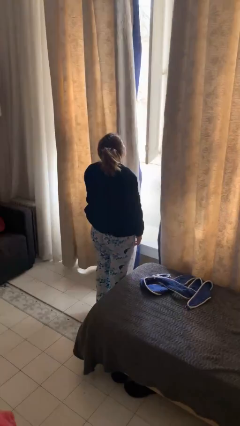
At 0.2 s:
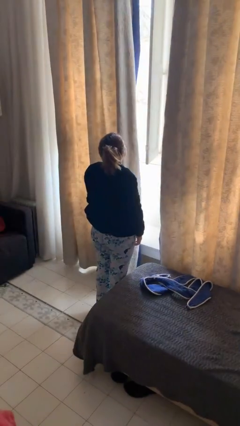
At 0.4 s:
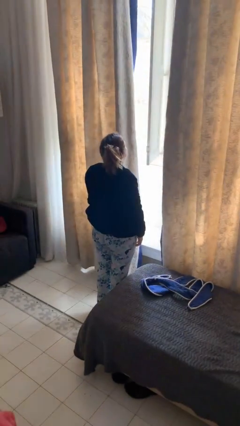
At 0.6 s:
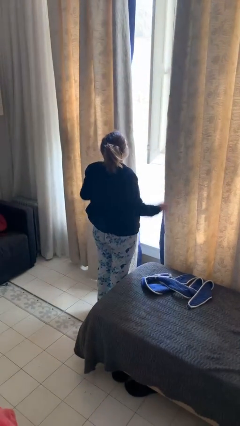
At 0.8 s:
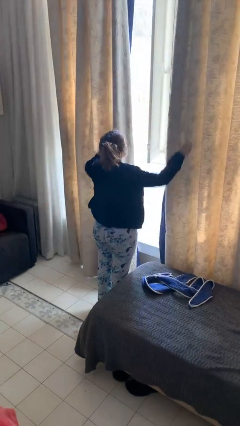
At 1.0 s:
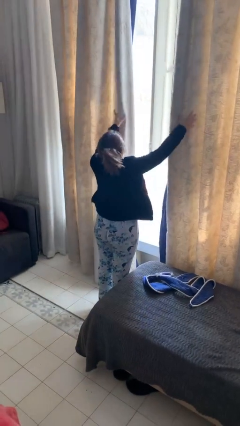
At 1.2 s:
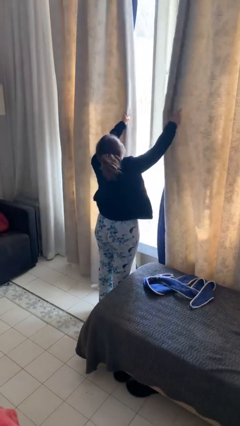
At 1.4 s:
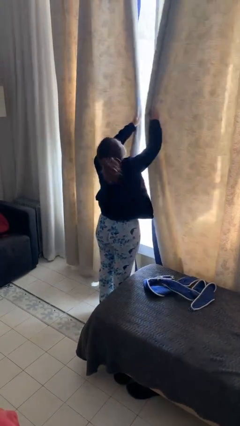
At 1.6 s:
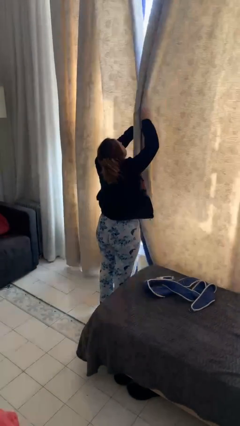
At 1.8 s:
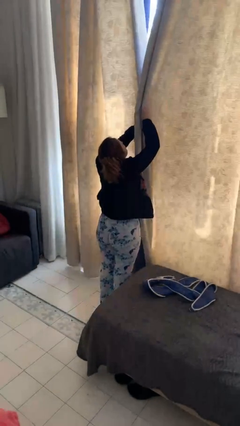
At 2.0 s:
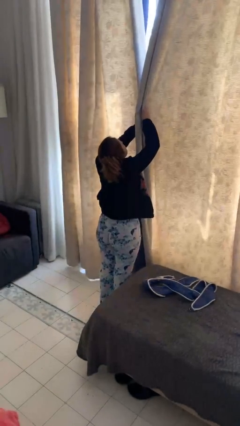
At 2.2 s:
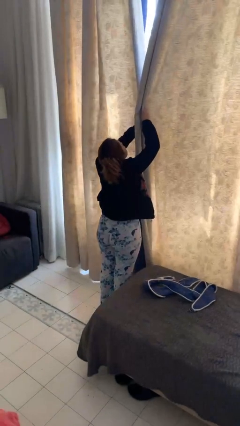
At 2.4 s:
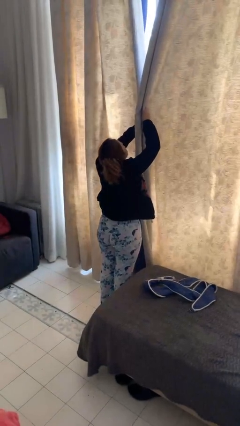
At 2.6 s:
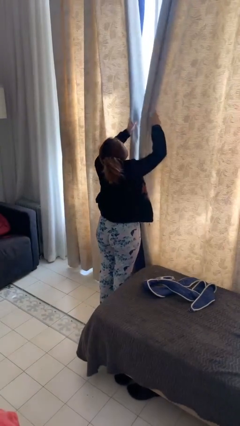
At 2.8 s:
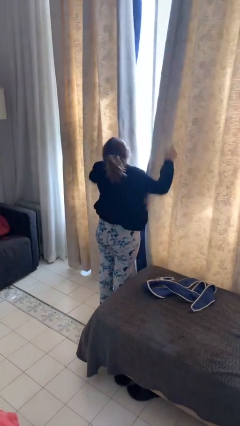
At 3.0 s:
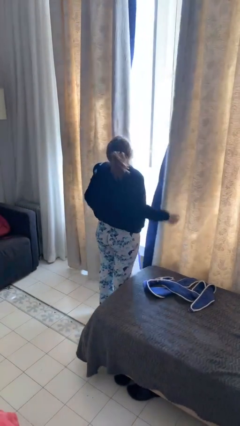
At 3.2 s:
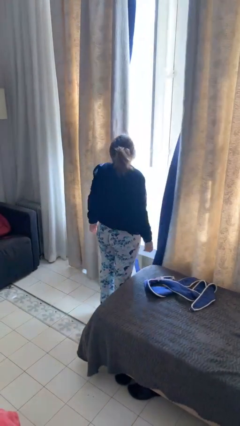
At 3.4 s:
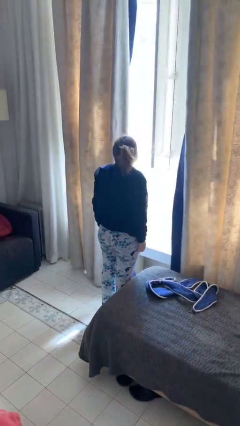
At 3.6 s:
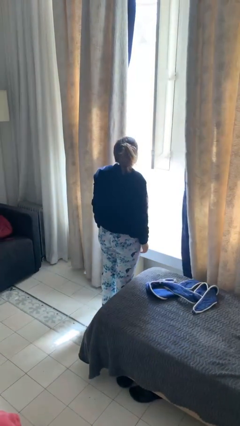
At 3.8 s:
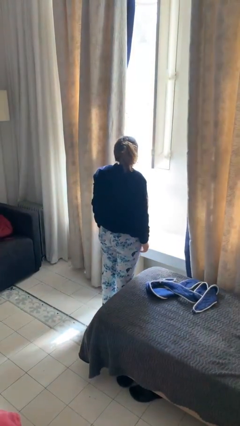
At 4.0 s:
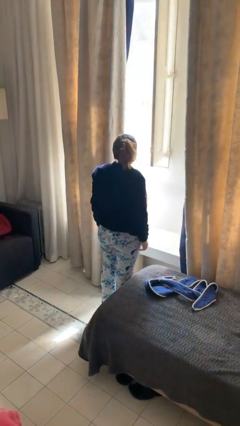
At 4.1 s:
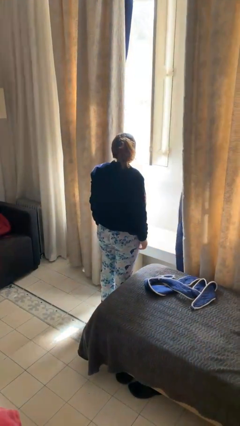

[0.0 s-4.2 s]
person closes curtains

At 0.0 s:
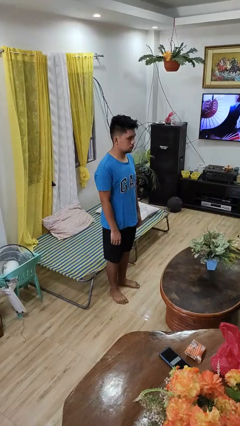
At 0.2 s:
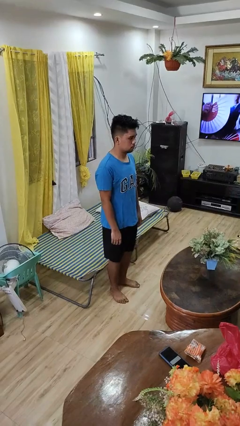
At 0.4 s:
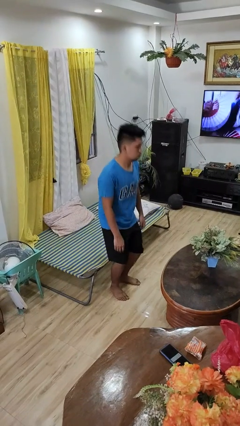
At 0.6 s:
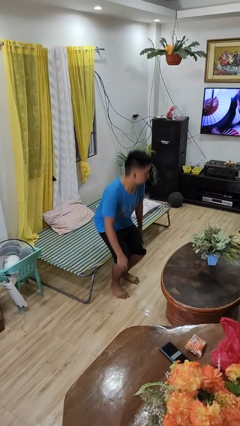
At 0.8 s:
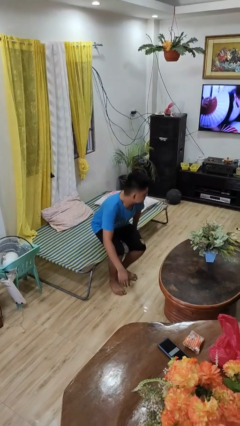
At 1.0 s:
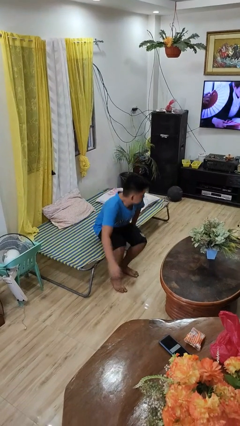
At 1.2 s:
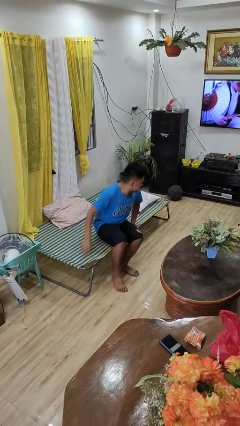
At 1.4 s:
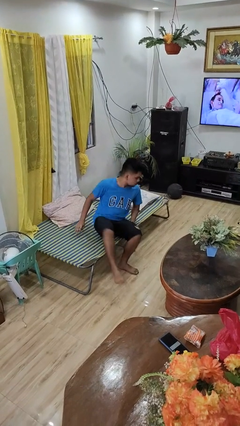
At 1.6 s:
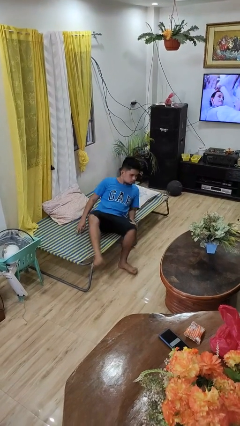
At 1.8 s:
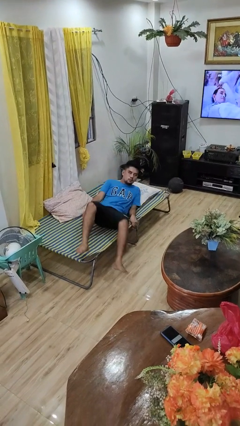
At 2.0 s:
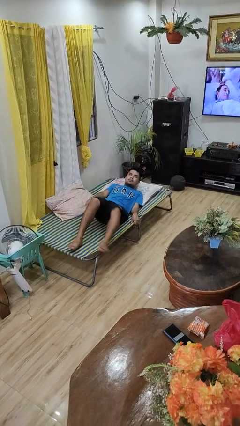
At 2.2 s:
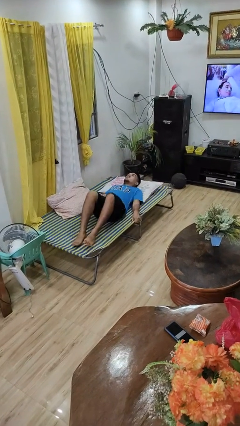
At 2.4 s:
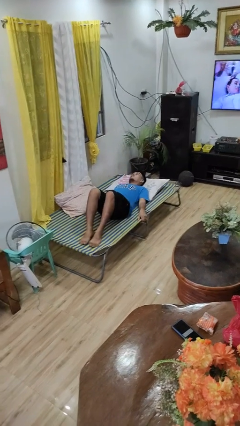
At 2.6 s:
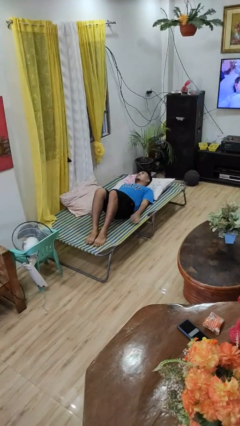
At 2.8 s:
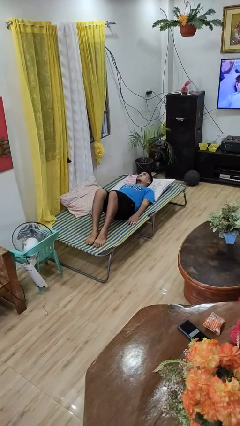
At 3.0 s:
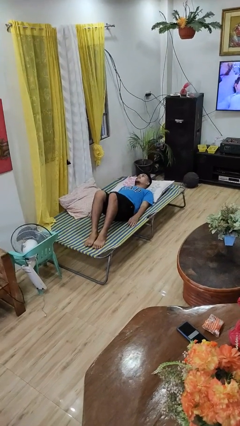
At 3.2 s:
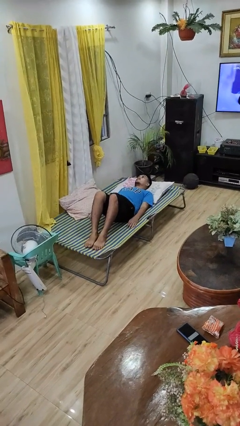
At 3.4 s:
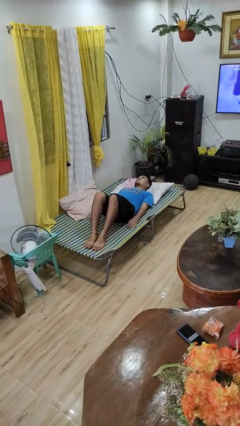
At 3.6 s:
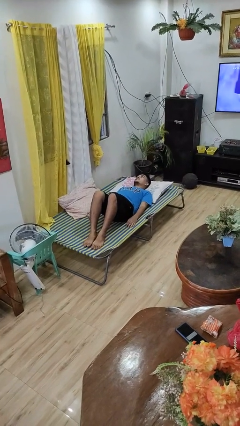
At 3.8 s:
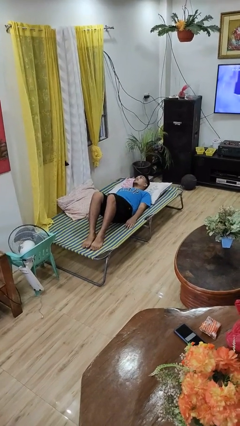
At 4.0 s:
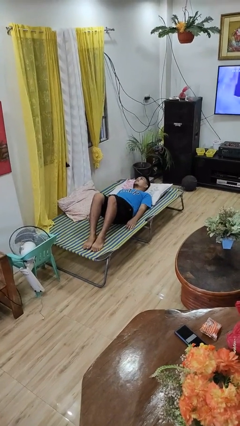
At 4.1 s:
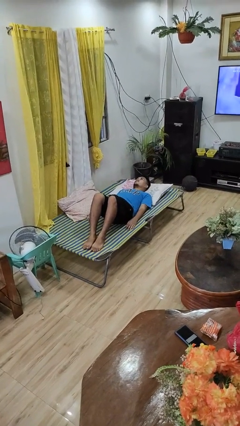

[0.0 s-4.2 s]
person lies down on bed

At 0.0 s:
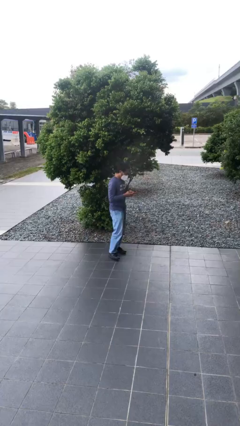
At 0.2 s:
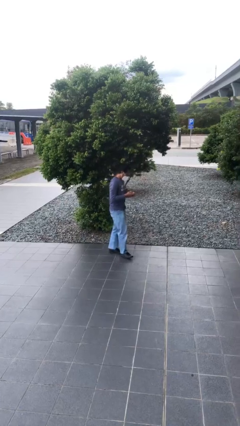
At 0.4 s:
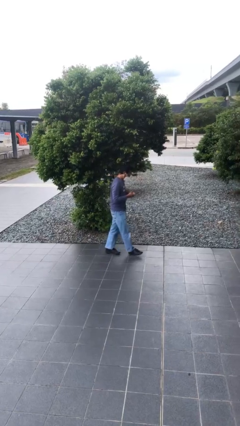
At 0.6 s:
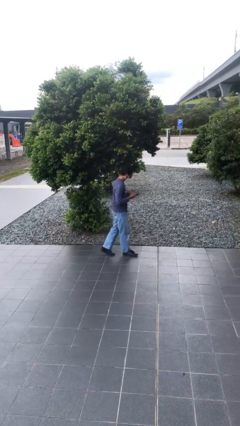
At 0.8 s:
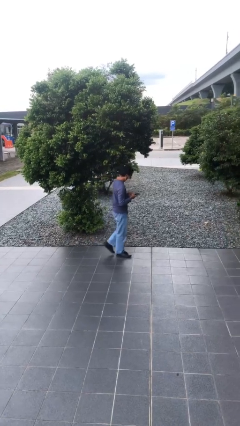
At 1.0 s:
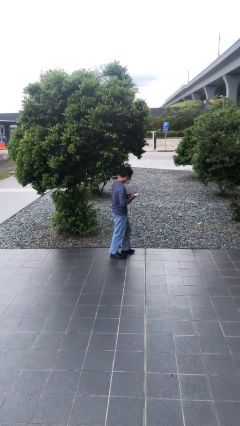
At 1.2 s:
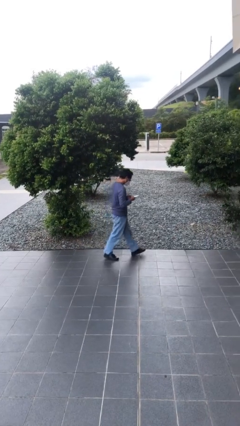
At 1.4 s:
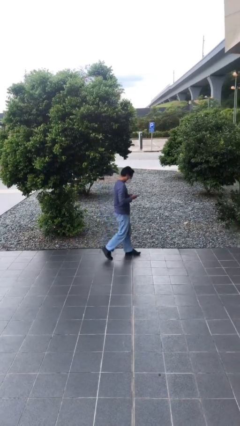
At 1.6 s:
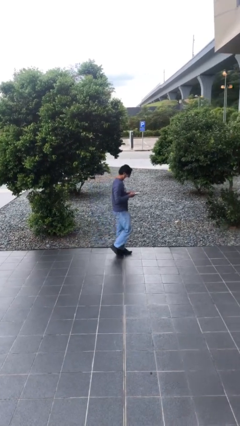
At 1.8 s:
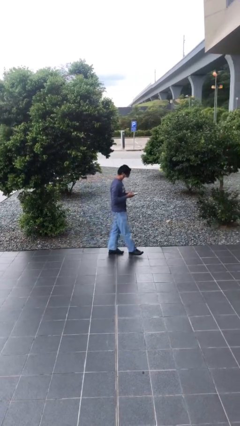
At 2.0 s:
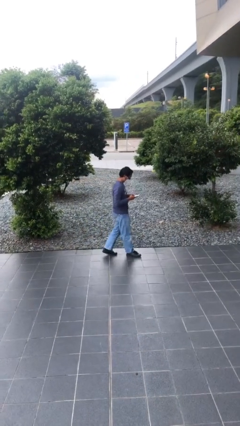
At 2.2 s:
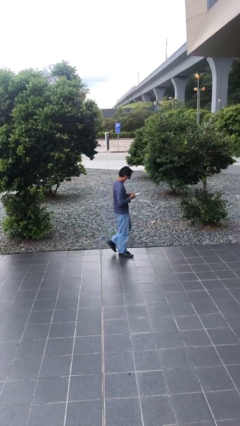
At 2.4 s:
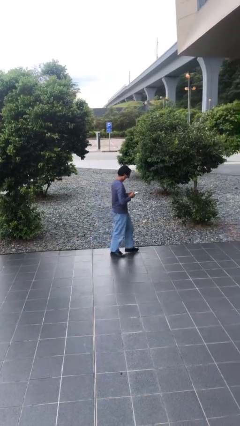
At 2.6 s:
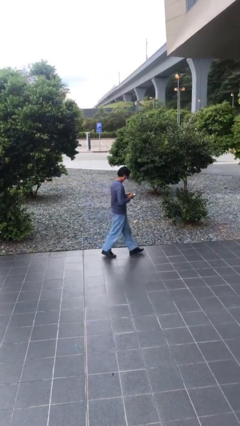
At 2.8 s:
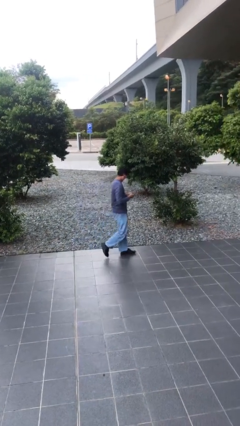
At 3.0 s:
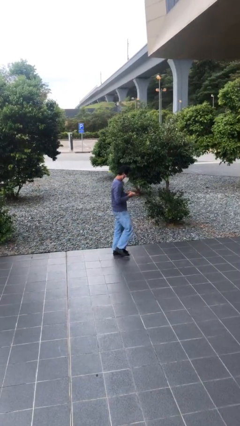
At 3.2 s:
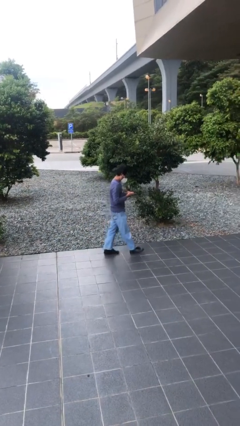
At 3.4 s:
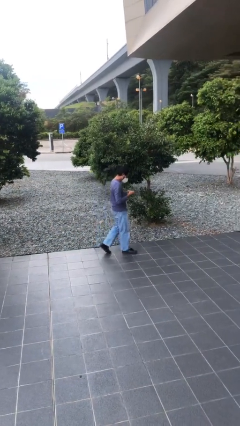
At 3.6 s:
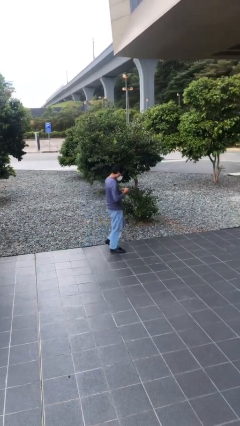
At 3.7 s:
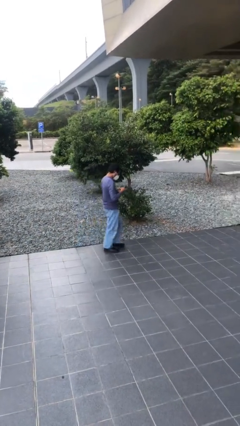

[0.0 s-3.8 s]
person texts on phone

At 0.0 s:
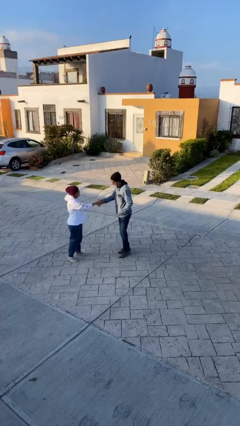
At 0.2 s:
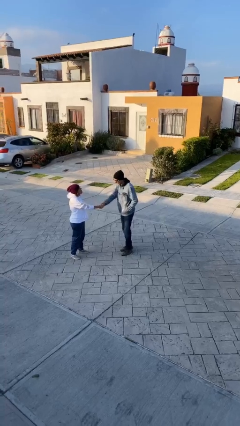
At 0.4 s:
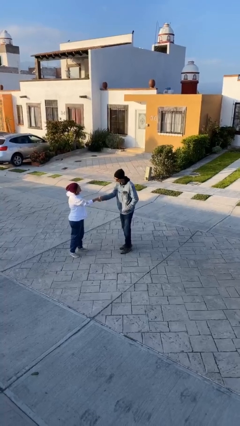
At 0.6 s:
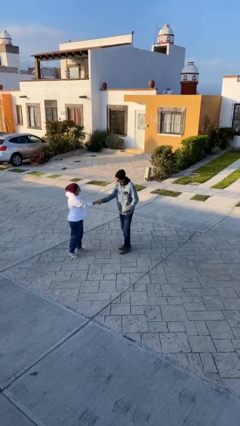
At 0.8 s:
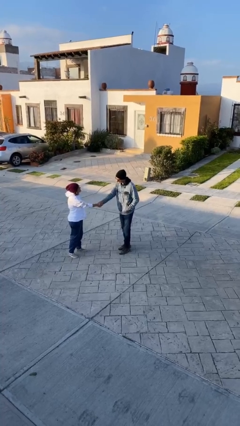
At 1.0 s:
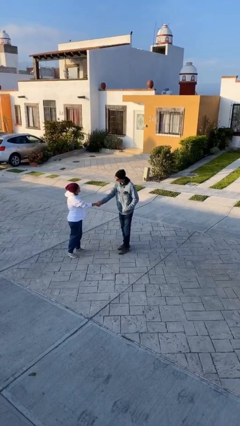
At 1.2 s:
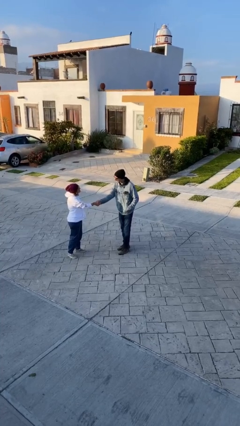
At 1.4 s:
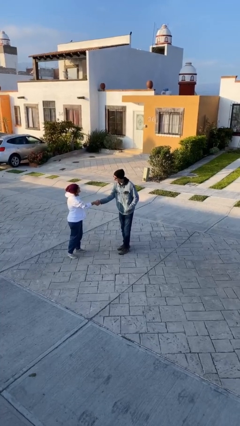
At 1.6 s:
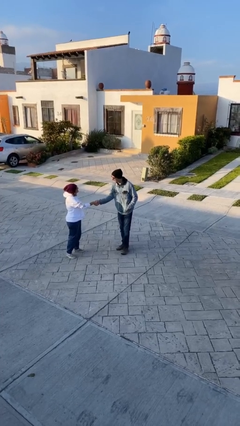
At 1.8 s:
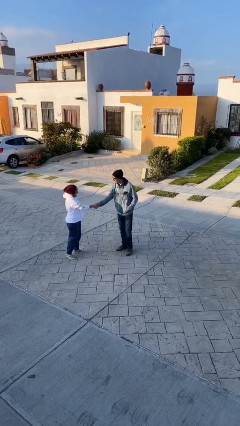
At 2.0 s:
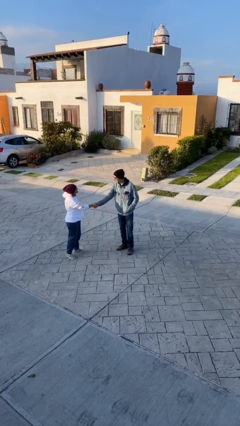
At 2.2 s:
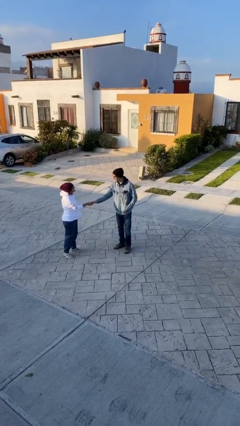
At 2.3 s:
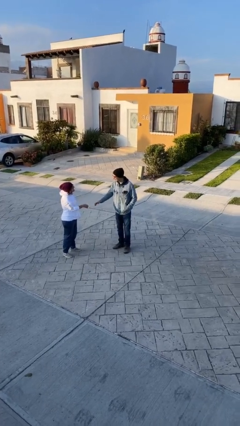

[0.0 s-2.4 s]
person shakes hand

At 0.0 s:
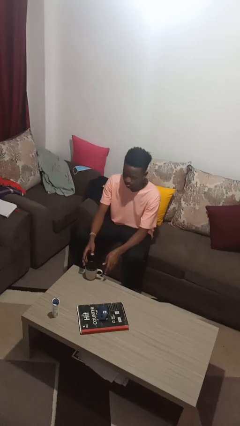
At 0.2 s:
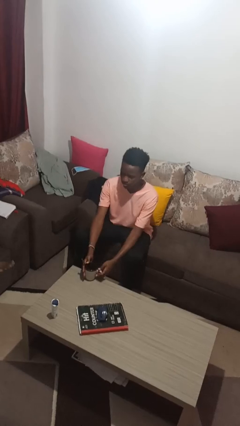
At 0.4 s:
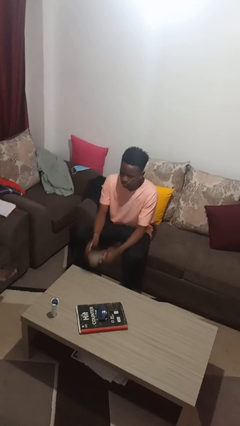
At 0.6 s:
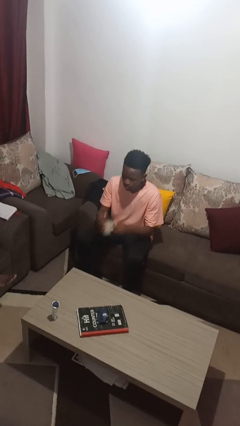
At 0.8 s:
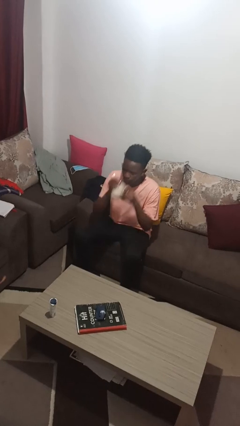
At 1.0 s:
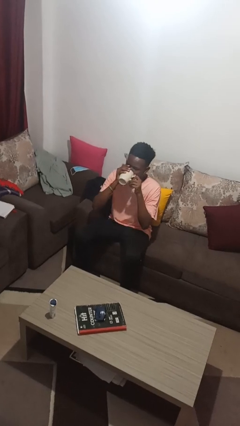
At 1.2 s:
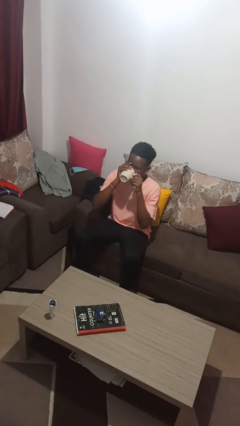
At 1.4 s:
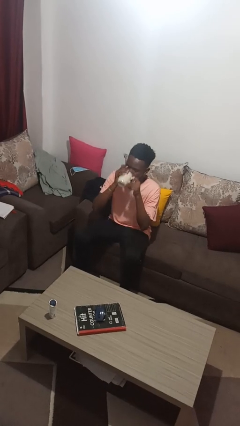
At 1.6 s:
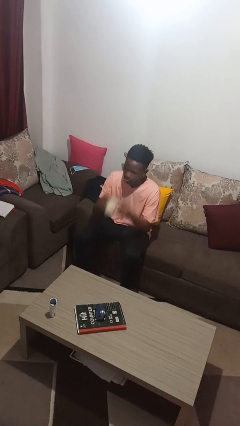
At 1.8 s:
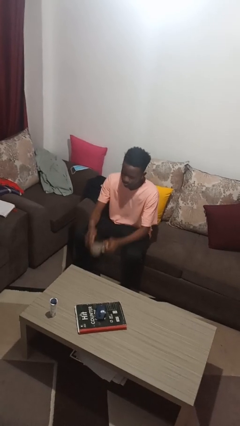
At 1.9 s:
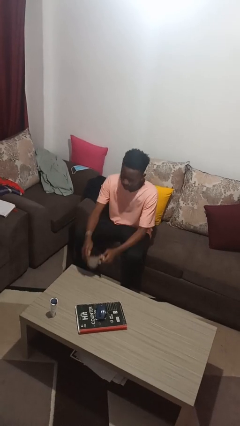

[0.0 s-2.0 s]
person drinks from mug

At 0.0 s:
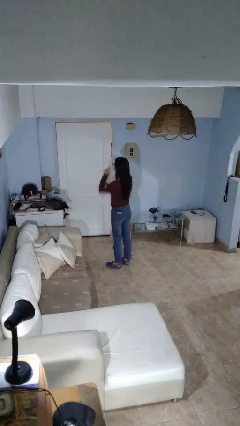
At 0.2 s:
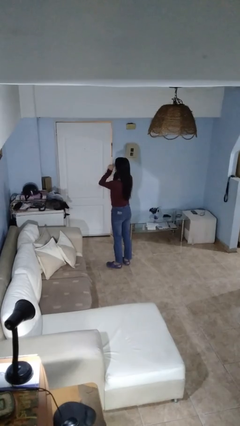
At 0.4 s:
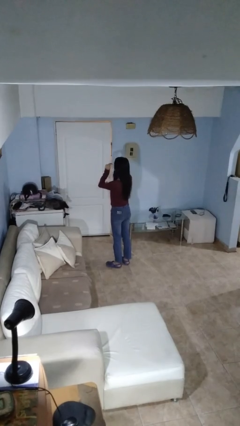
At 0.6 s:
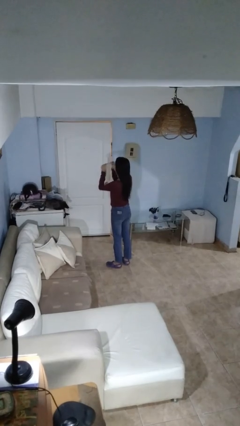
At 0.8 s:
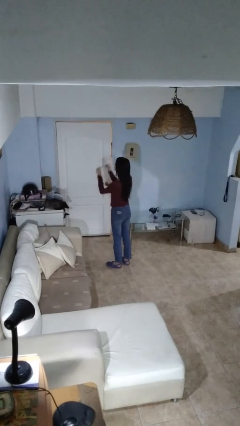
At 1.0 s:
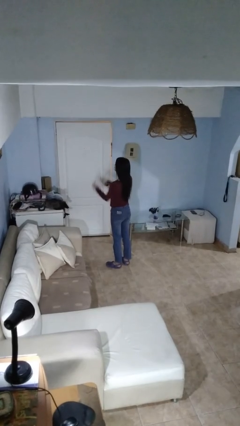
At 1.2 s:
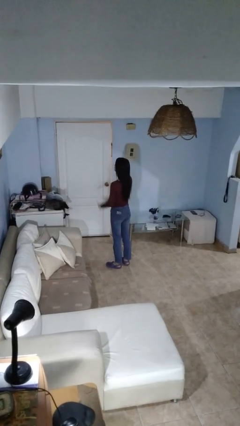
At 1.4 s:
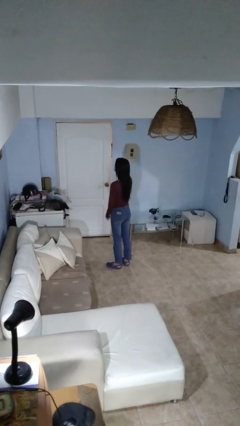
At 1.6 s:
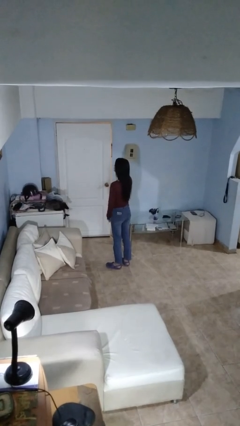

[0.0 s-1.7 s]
person takes off glasses
